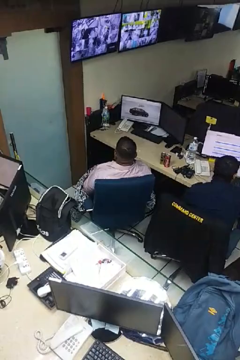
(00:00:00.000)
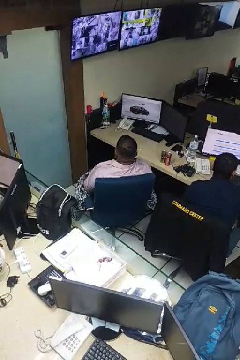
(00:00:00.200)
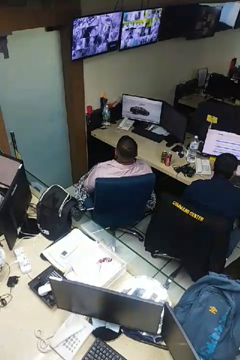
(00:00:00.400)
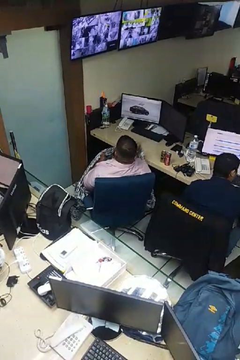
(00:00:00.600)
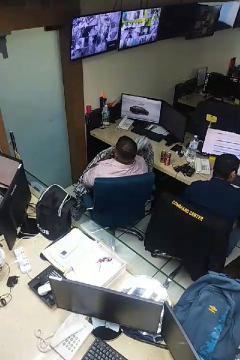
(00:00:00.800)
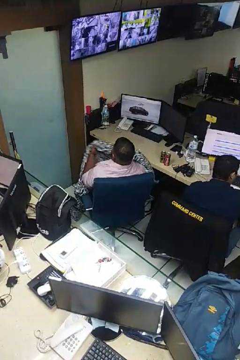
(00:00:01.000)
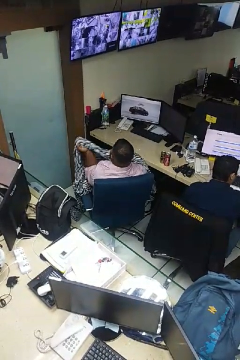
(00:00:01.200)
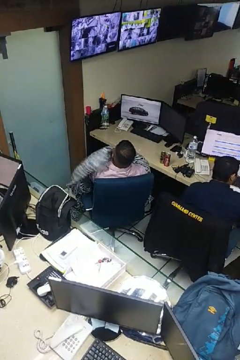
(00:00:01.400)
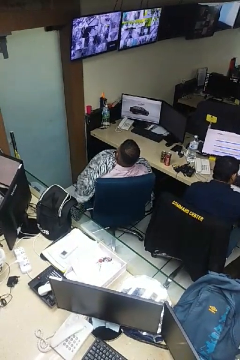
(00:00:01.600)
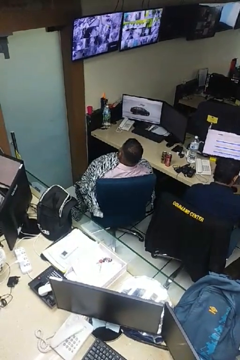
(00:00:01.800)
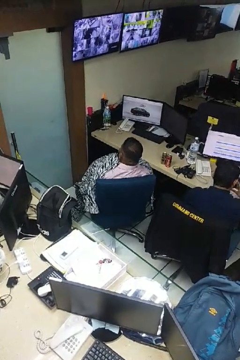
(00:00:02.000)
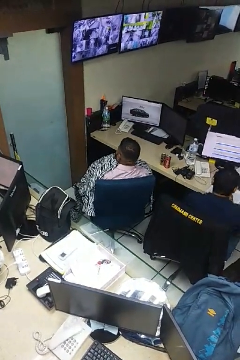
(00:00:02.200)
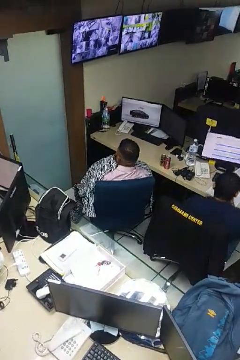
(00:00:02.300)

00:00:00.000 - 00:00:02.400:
person covers with blanket

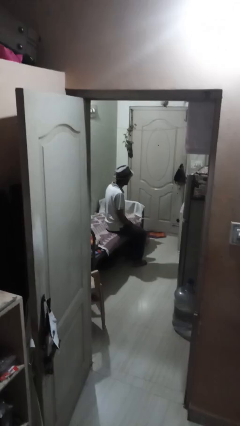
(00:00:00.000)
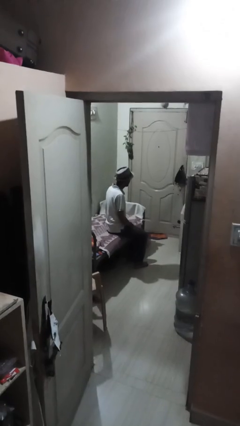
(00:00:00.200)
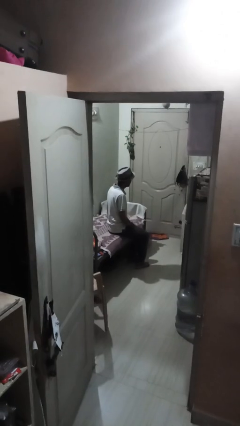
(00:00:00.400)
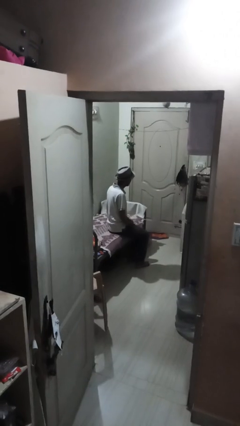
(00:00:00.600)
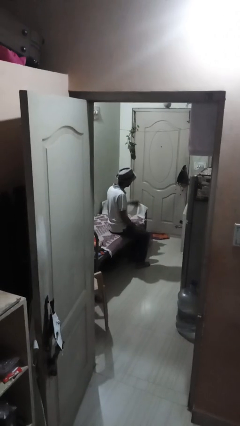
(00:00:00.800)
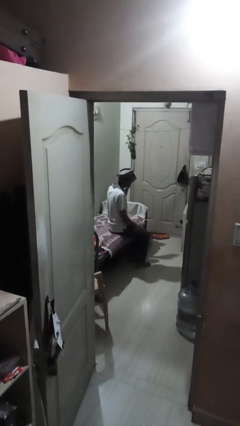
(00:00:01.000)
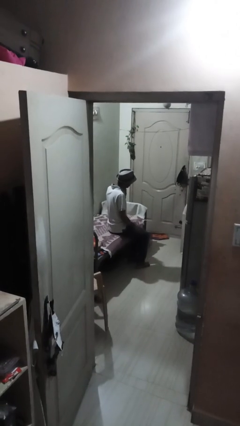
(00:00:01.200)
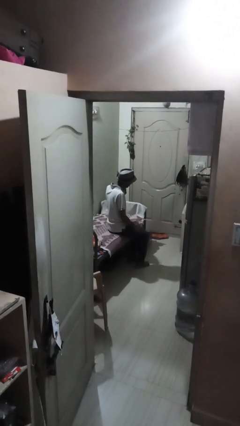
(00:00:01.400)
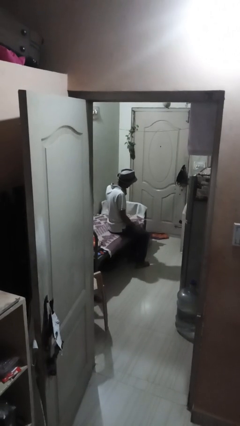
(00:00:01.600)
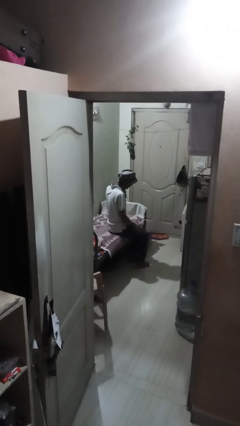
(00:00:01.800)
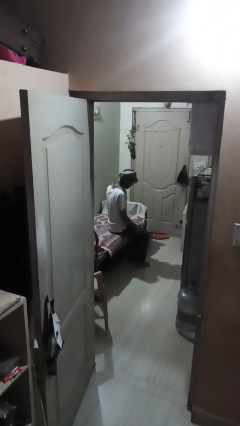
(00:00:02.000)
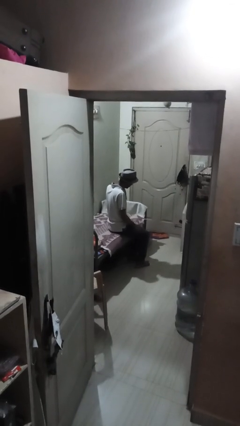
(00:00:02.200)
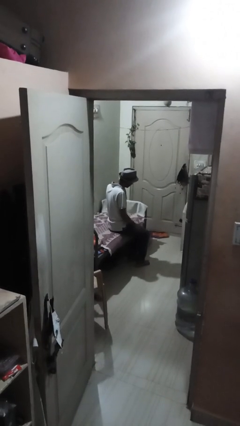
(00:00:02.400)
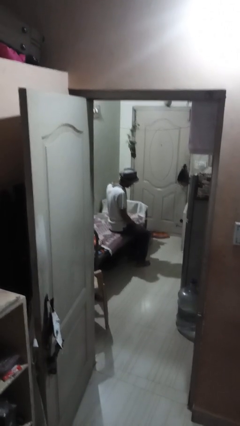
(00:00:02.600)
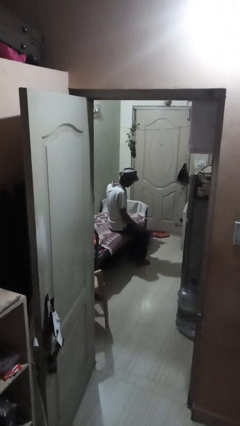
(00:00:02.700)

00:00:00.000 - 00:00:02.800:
person gestures listen closely

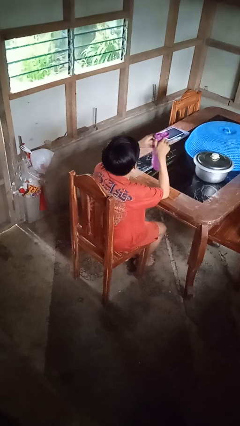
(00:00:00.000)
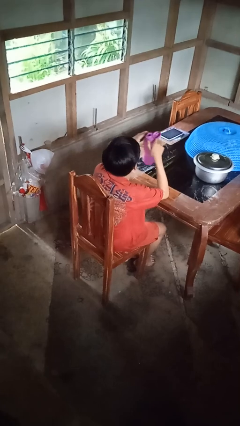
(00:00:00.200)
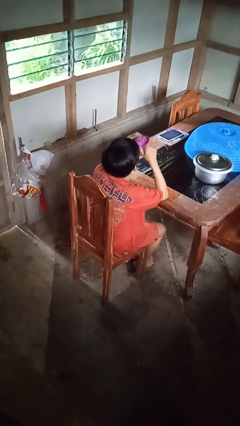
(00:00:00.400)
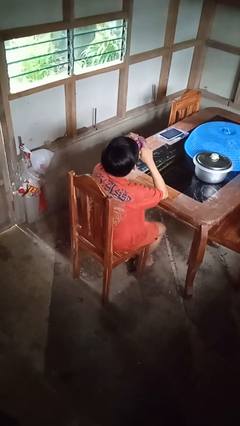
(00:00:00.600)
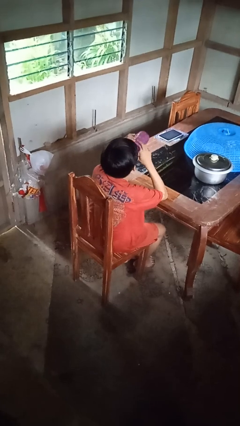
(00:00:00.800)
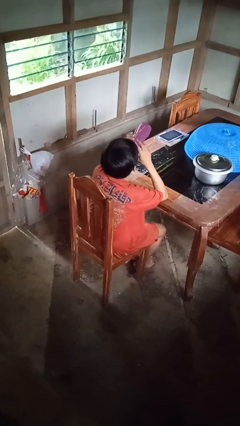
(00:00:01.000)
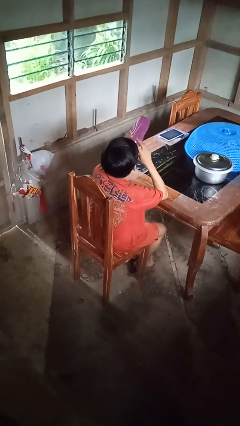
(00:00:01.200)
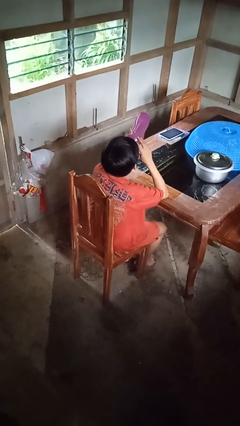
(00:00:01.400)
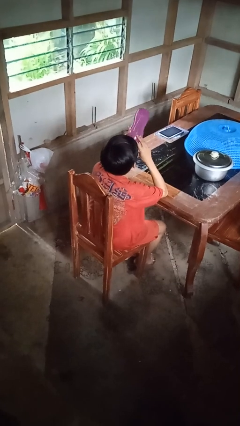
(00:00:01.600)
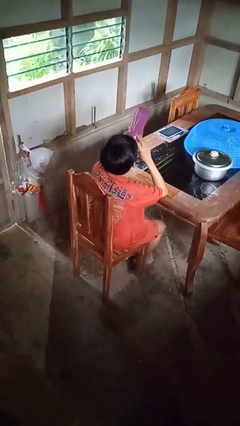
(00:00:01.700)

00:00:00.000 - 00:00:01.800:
person drinks from bottle

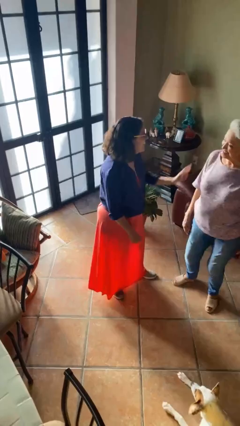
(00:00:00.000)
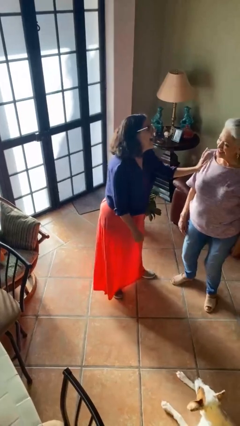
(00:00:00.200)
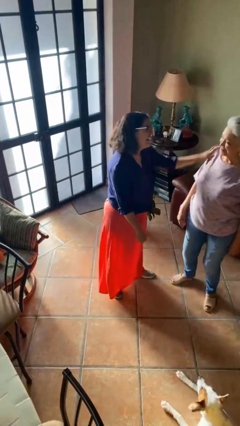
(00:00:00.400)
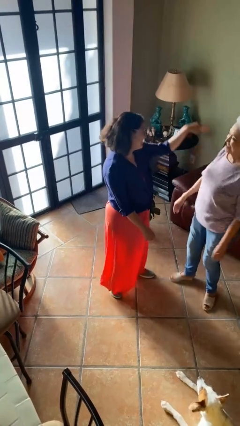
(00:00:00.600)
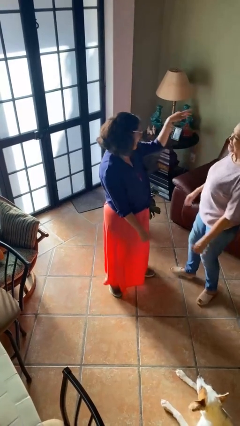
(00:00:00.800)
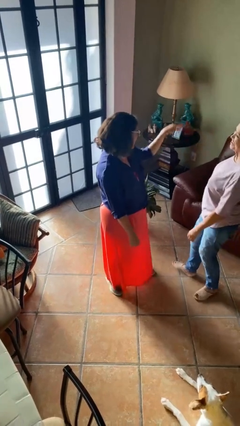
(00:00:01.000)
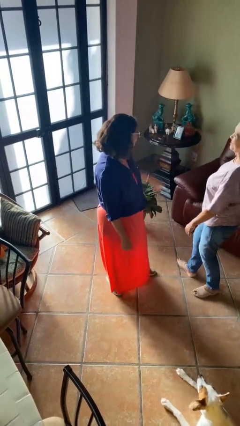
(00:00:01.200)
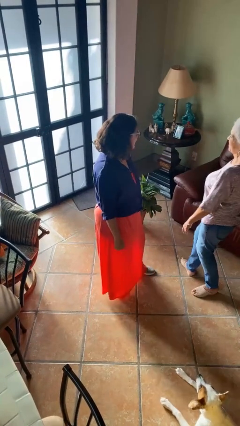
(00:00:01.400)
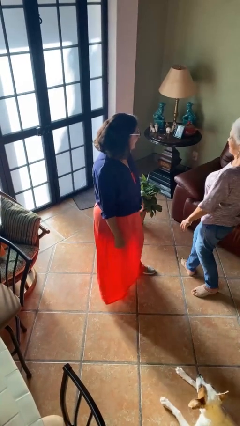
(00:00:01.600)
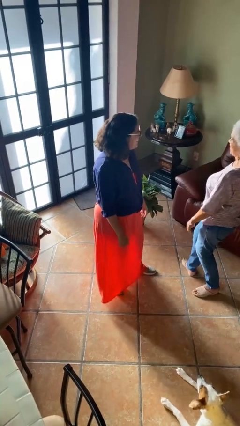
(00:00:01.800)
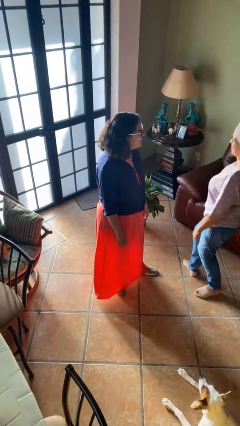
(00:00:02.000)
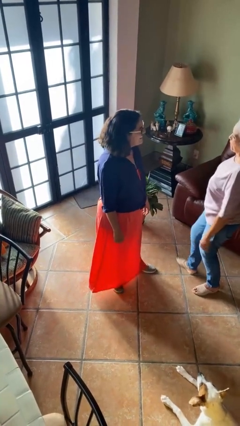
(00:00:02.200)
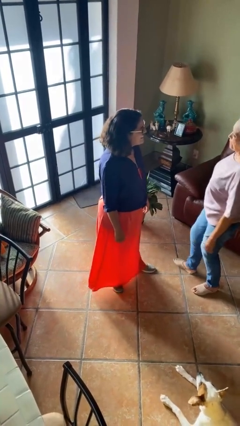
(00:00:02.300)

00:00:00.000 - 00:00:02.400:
person shoves person

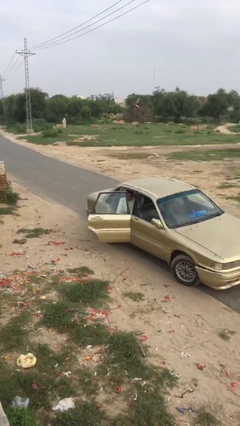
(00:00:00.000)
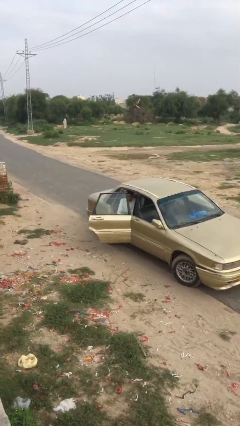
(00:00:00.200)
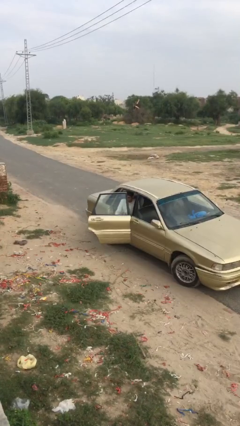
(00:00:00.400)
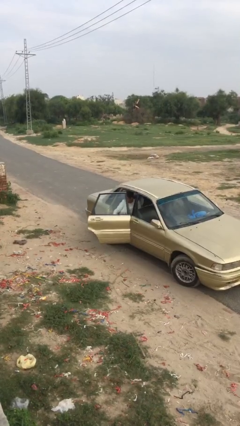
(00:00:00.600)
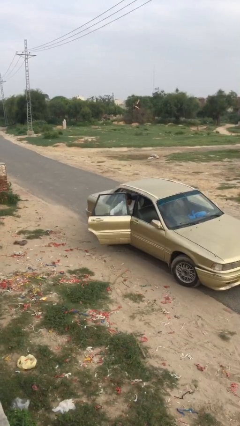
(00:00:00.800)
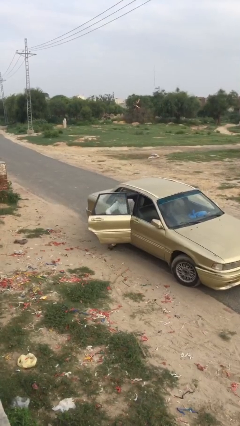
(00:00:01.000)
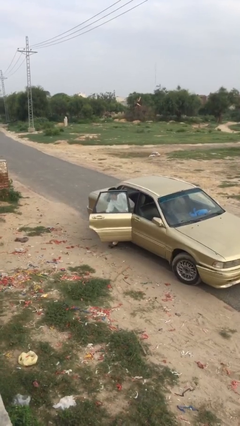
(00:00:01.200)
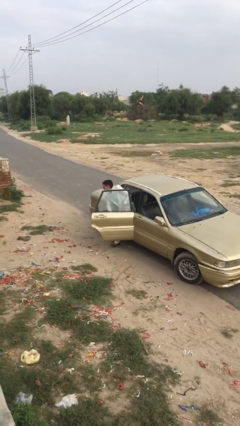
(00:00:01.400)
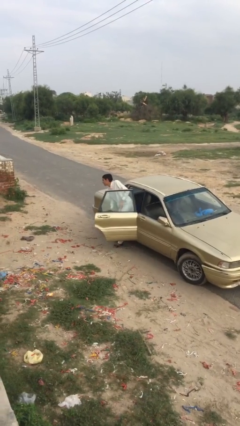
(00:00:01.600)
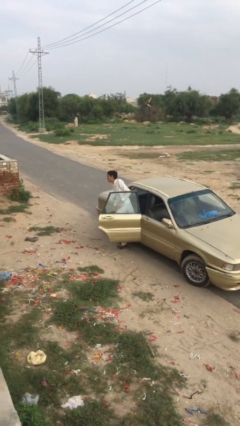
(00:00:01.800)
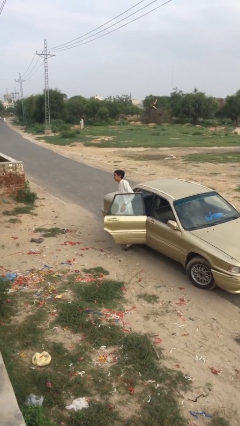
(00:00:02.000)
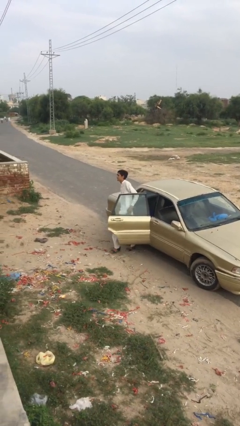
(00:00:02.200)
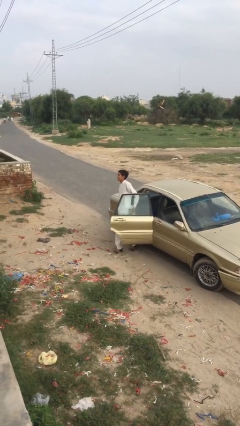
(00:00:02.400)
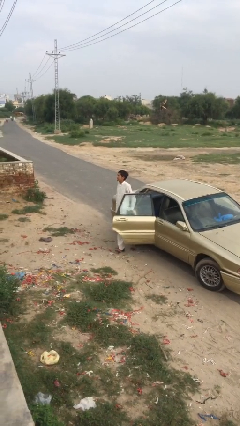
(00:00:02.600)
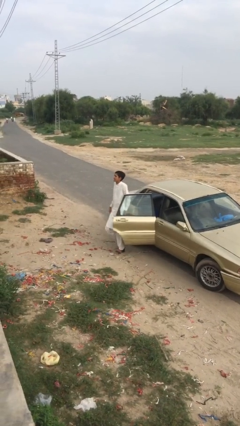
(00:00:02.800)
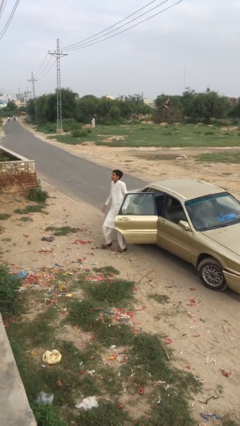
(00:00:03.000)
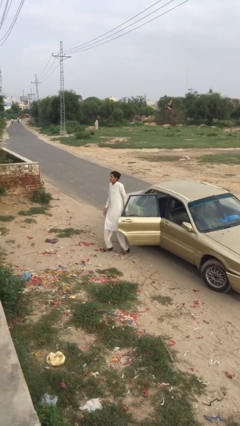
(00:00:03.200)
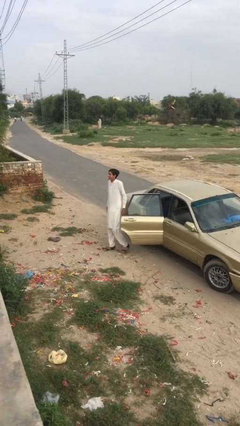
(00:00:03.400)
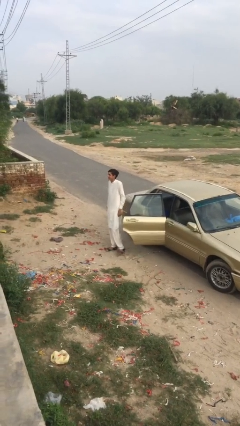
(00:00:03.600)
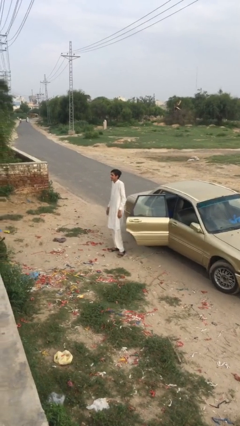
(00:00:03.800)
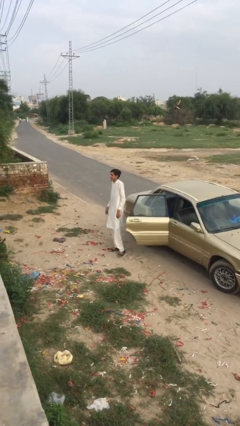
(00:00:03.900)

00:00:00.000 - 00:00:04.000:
person exits car

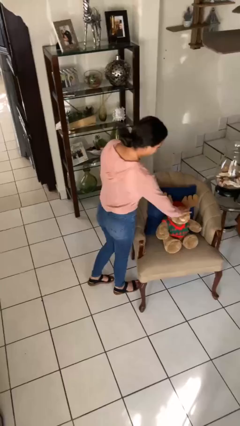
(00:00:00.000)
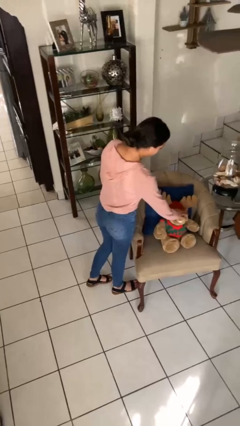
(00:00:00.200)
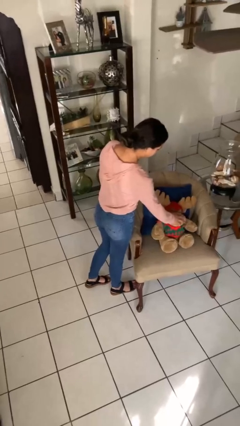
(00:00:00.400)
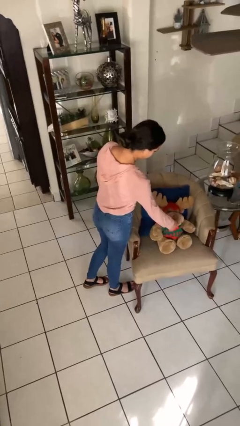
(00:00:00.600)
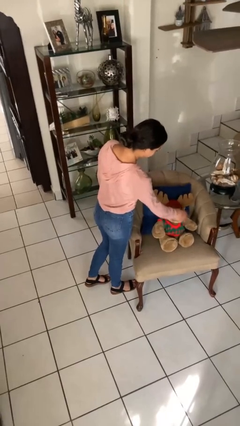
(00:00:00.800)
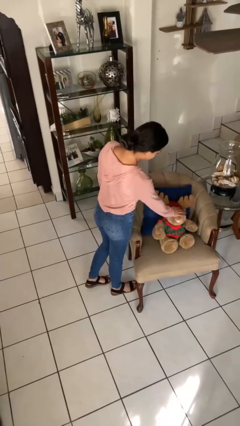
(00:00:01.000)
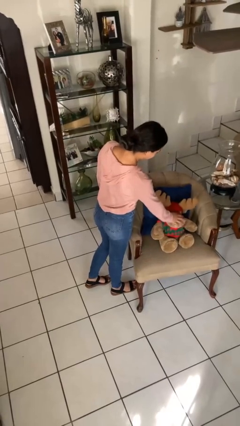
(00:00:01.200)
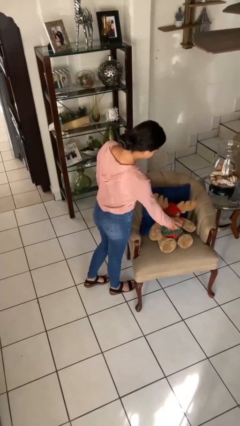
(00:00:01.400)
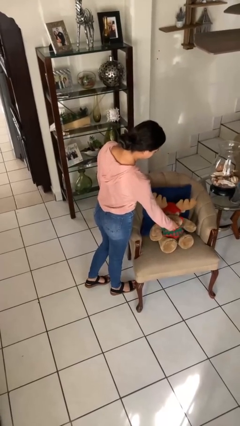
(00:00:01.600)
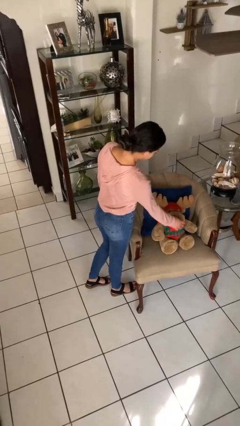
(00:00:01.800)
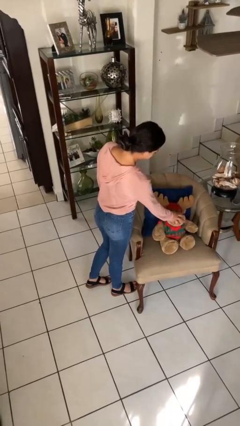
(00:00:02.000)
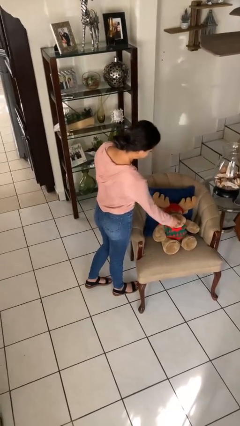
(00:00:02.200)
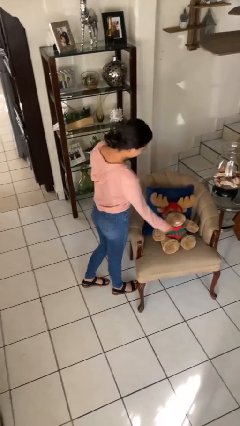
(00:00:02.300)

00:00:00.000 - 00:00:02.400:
person waves hand over object

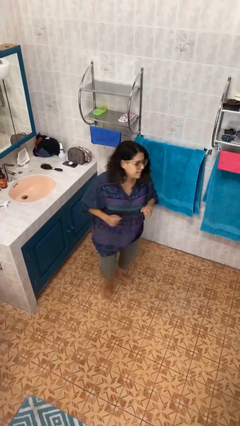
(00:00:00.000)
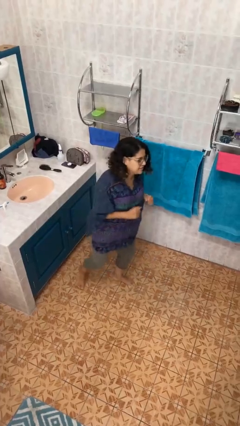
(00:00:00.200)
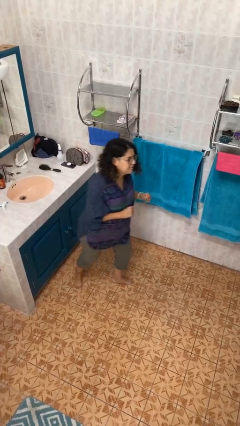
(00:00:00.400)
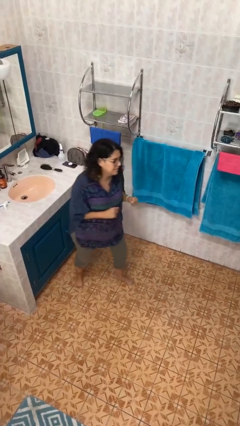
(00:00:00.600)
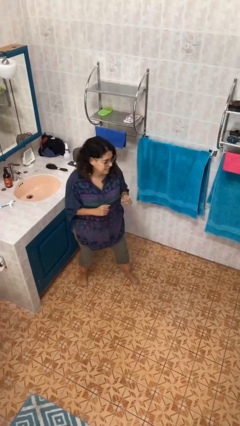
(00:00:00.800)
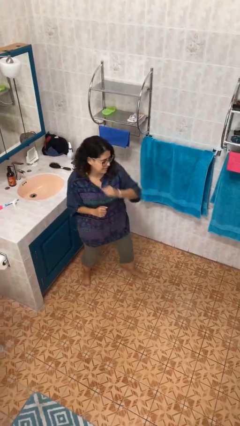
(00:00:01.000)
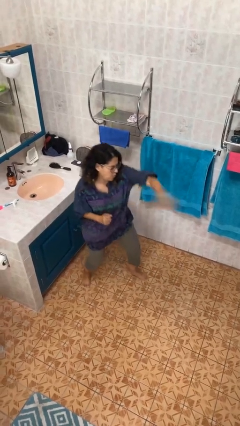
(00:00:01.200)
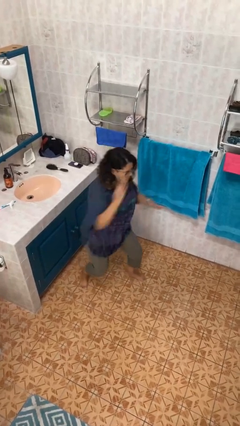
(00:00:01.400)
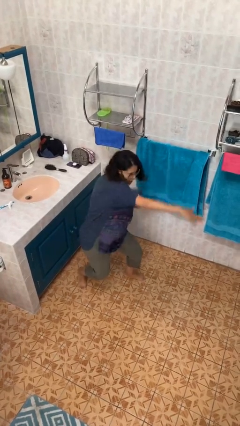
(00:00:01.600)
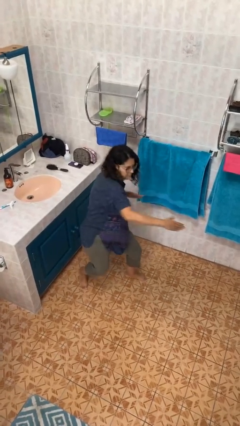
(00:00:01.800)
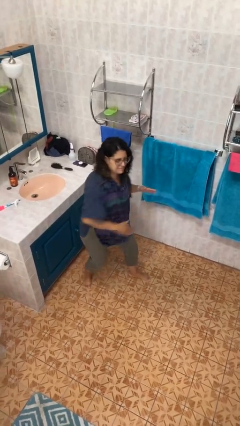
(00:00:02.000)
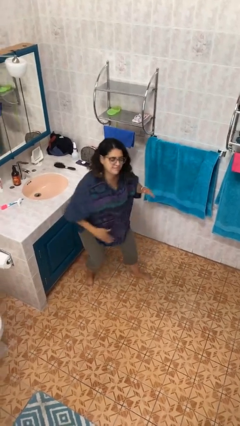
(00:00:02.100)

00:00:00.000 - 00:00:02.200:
person karate chop
